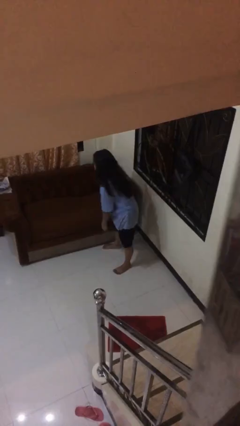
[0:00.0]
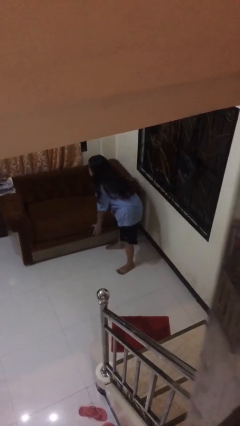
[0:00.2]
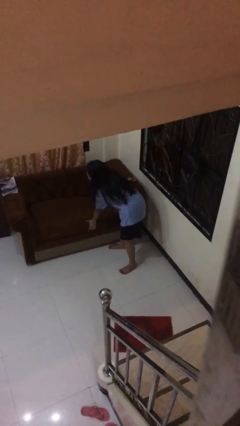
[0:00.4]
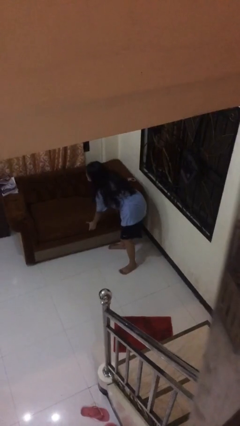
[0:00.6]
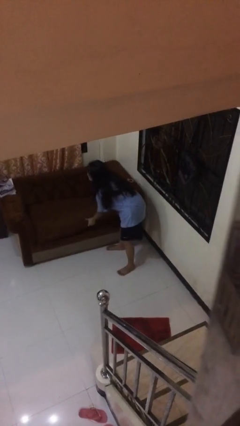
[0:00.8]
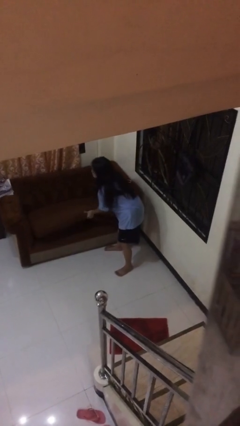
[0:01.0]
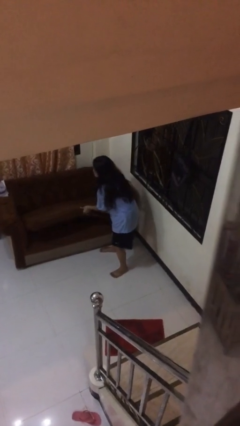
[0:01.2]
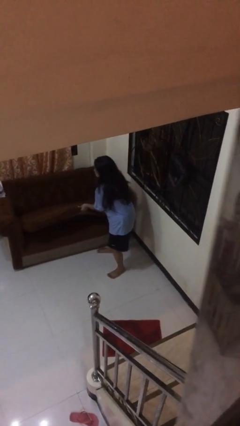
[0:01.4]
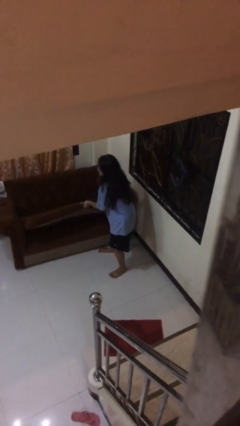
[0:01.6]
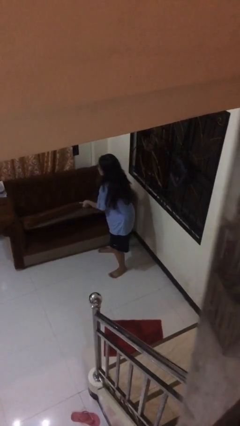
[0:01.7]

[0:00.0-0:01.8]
person picks up object from floor

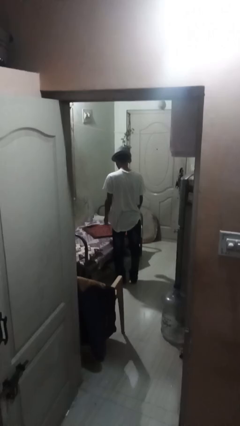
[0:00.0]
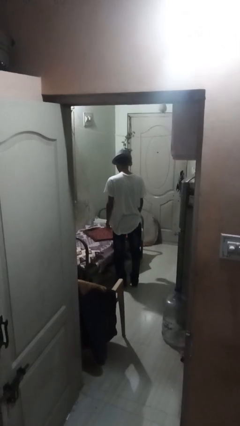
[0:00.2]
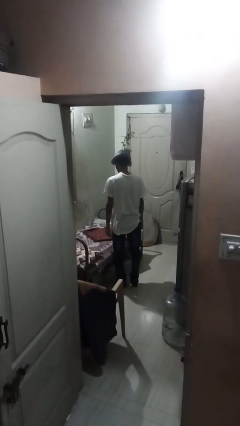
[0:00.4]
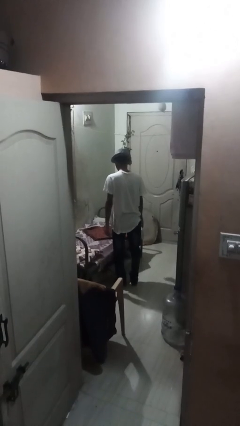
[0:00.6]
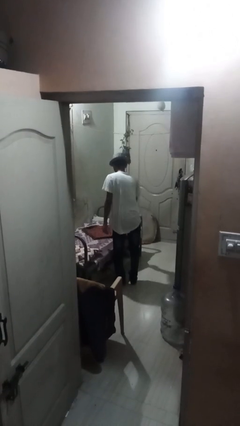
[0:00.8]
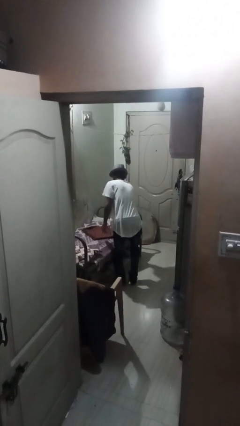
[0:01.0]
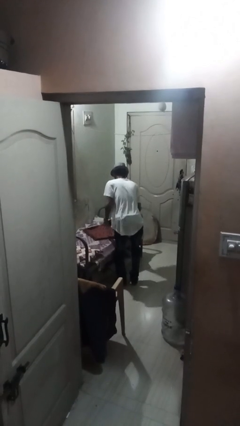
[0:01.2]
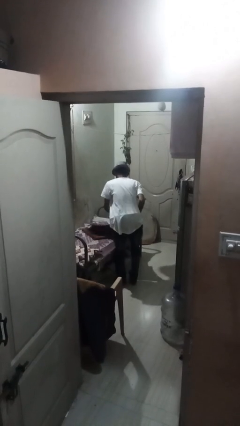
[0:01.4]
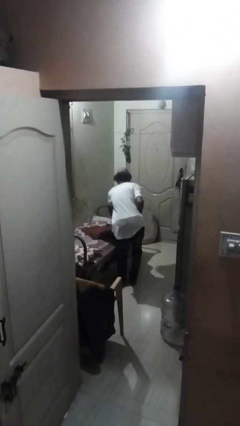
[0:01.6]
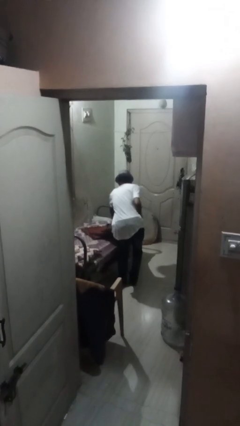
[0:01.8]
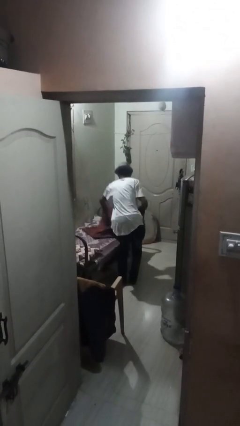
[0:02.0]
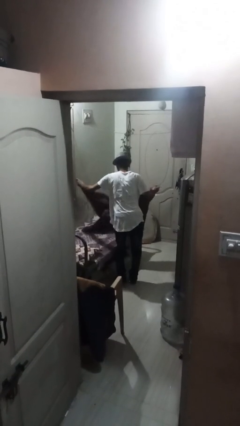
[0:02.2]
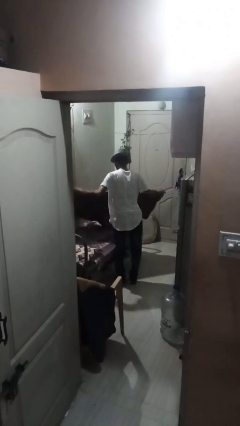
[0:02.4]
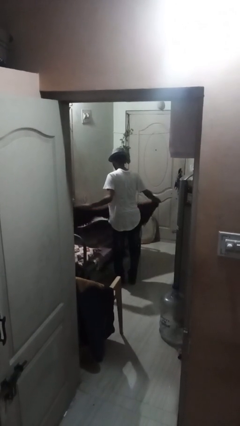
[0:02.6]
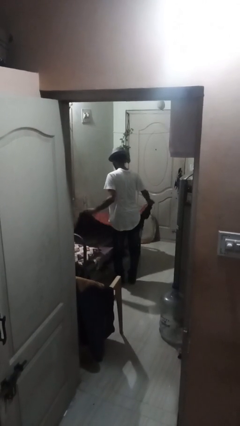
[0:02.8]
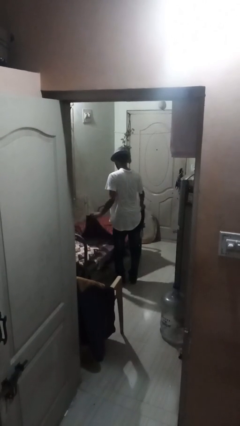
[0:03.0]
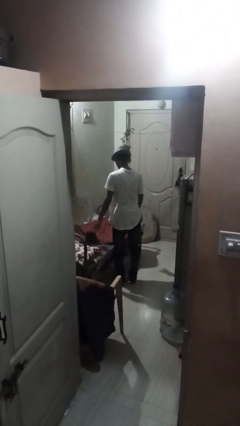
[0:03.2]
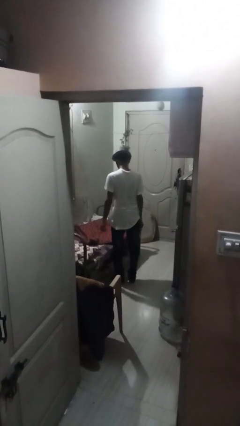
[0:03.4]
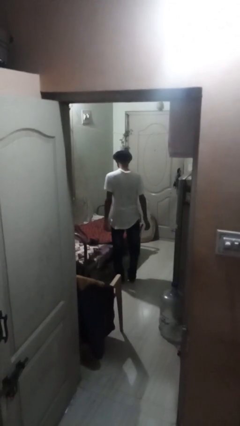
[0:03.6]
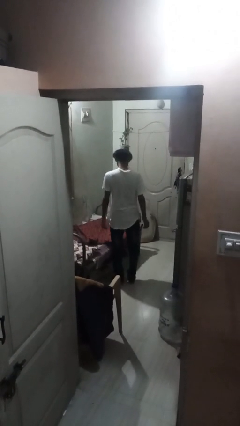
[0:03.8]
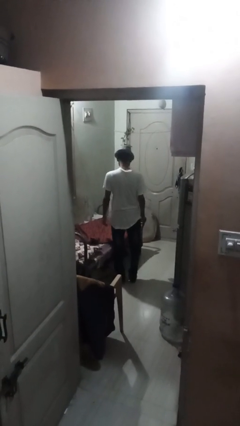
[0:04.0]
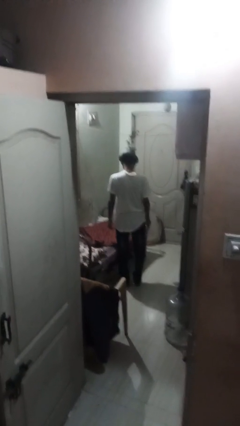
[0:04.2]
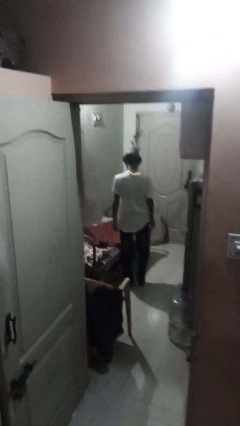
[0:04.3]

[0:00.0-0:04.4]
person unfolds blanket

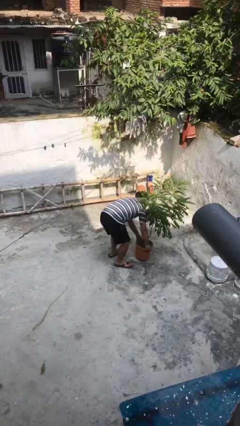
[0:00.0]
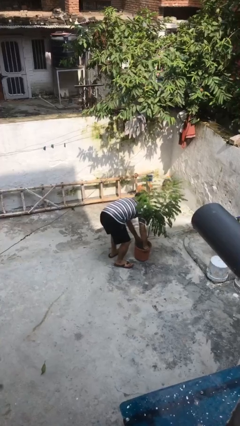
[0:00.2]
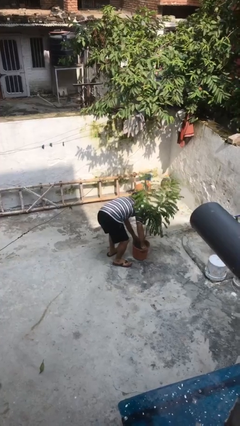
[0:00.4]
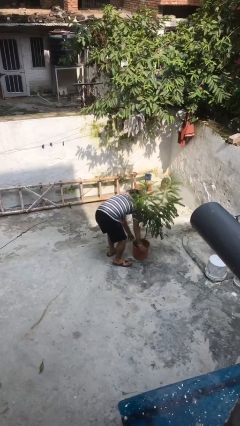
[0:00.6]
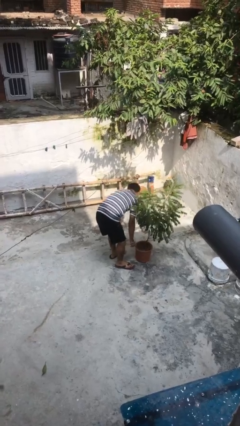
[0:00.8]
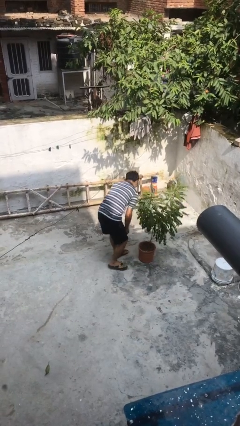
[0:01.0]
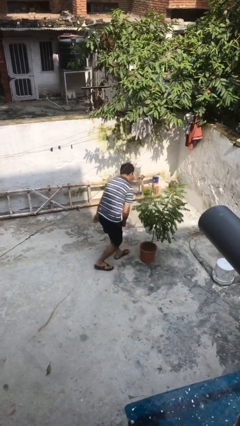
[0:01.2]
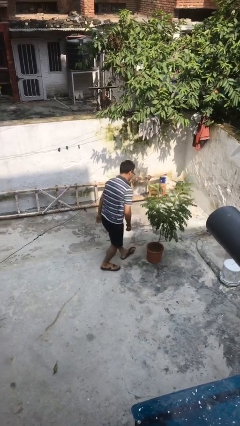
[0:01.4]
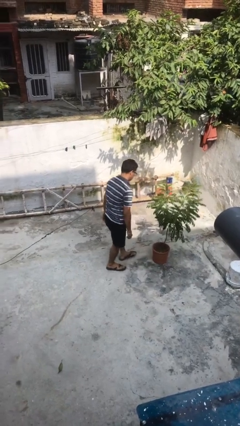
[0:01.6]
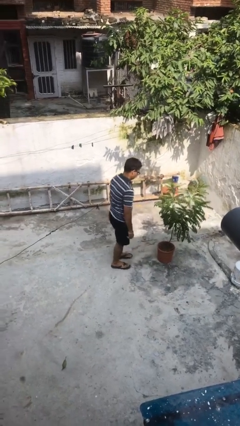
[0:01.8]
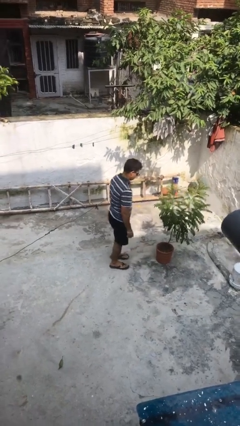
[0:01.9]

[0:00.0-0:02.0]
person puts down object on floor

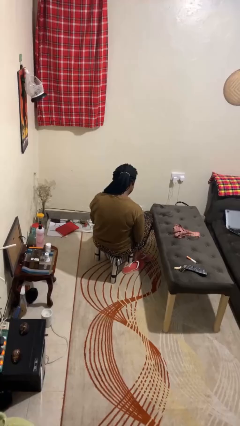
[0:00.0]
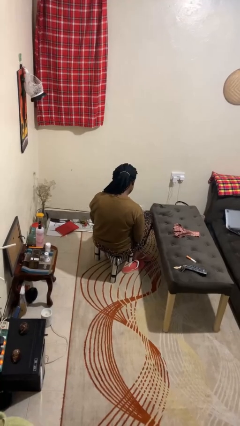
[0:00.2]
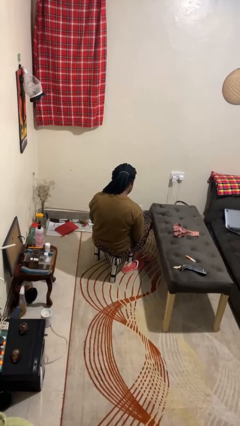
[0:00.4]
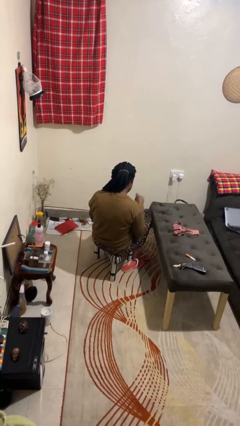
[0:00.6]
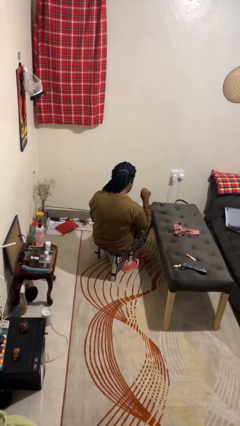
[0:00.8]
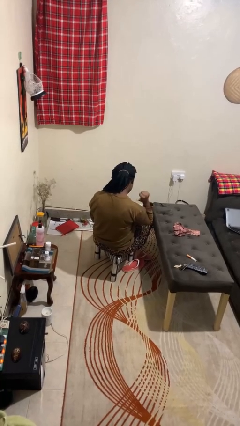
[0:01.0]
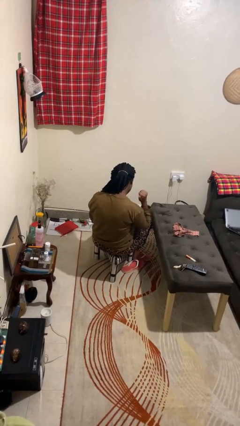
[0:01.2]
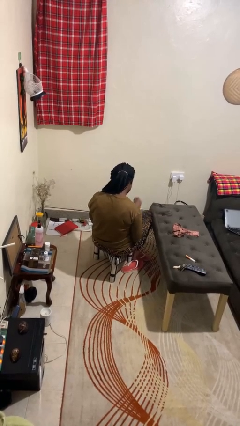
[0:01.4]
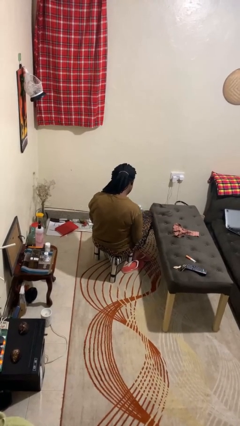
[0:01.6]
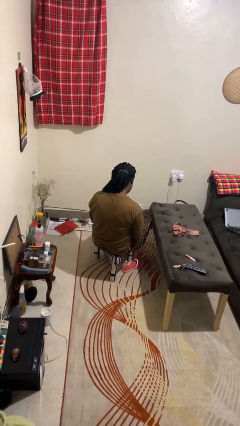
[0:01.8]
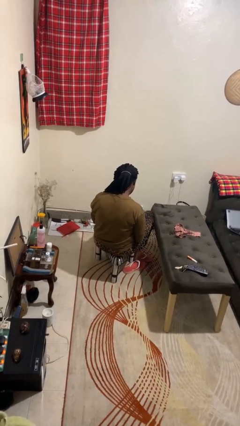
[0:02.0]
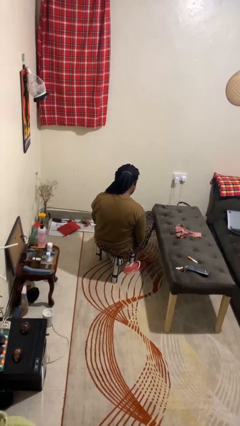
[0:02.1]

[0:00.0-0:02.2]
person gestures behind me

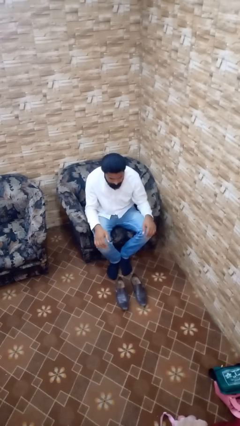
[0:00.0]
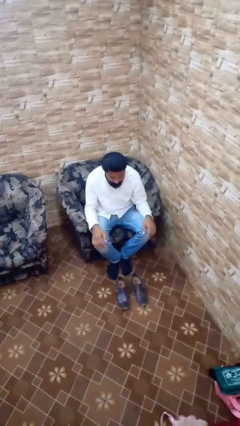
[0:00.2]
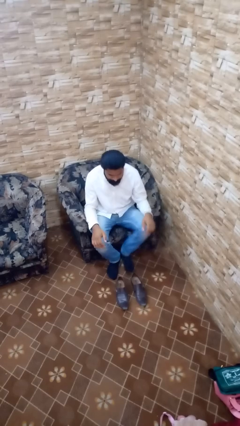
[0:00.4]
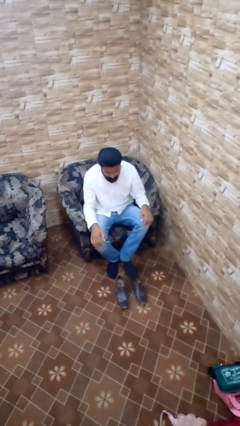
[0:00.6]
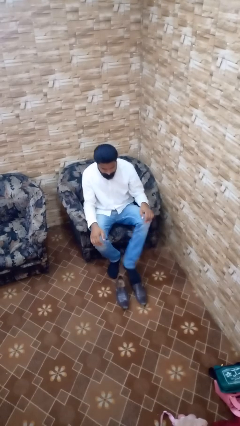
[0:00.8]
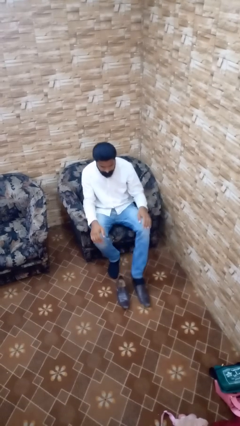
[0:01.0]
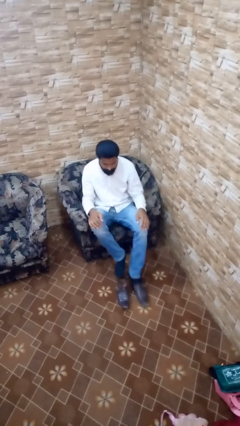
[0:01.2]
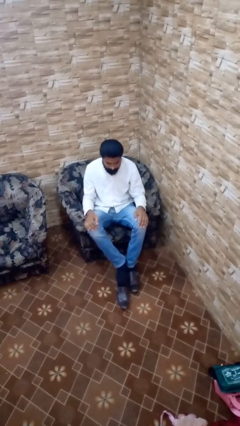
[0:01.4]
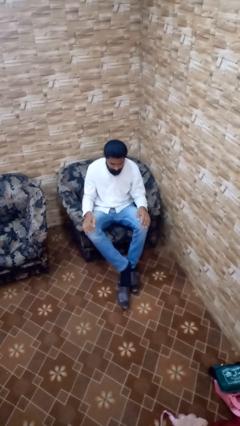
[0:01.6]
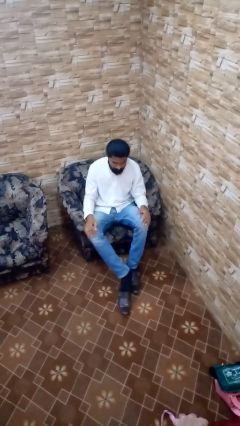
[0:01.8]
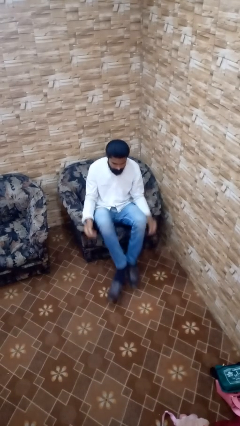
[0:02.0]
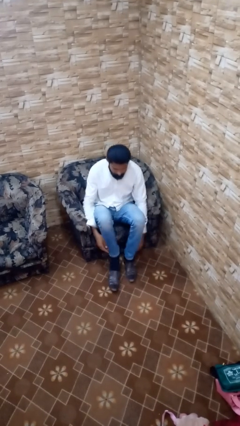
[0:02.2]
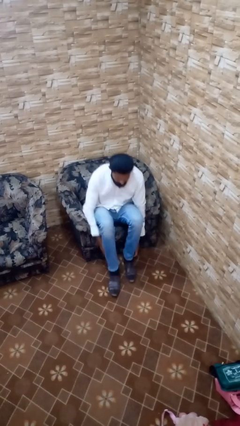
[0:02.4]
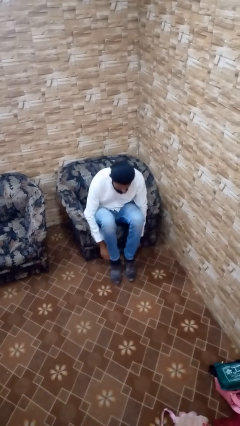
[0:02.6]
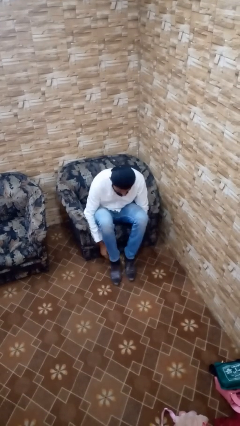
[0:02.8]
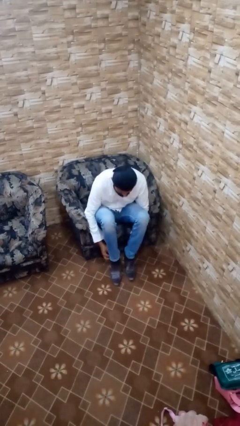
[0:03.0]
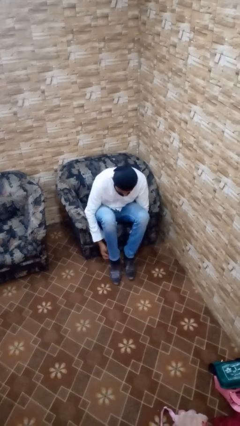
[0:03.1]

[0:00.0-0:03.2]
person puts on shoes

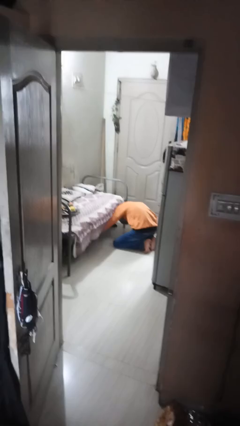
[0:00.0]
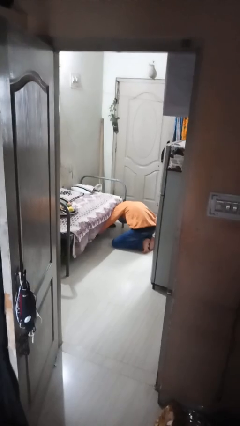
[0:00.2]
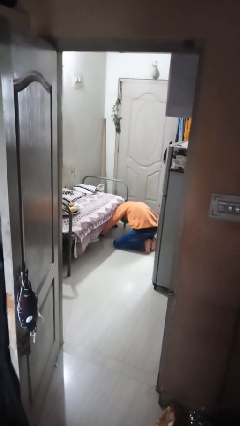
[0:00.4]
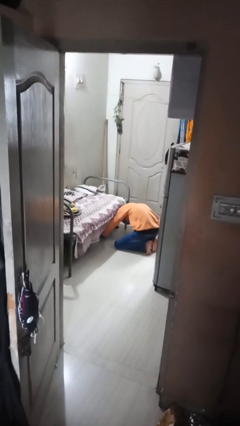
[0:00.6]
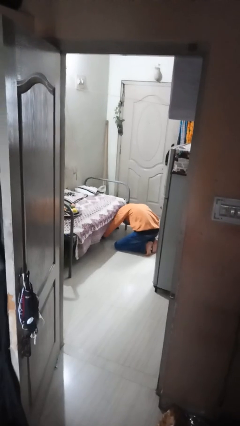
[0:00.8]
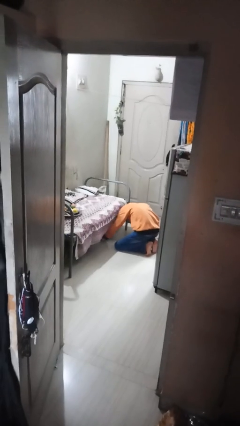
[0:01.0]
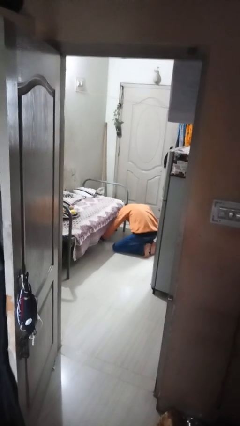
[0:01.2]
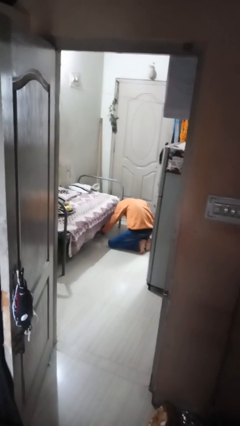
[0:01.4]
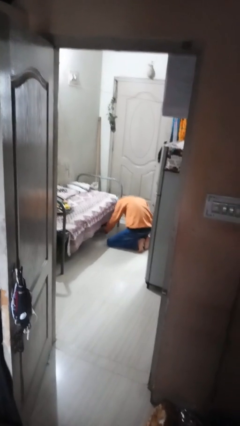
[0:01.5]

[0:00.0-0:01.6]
person searches under bed

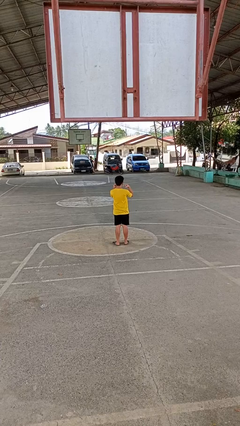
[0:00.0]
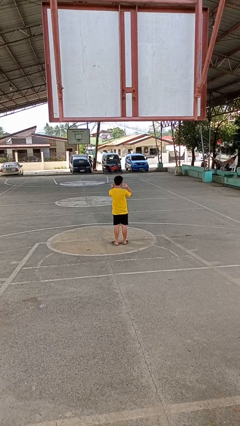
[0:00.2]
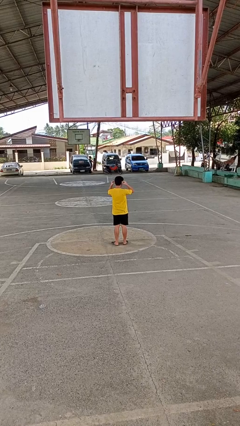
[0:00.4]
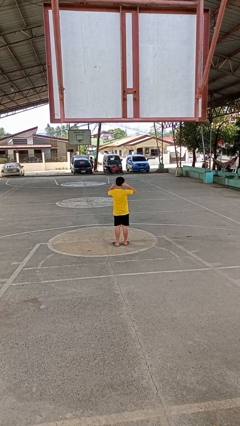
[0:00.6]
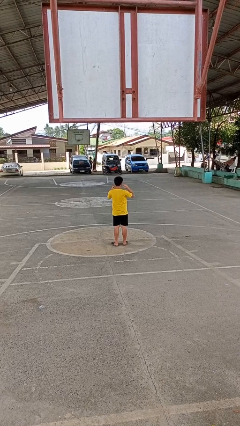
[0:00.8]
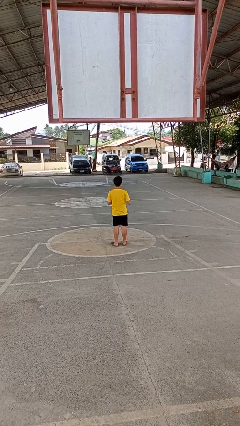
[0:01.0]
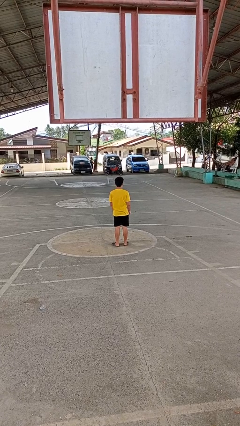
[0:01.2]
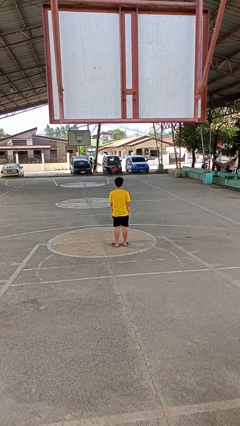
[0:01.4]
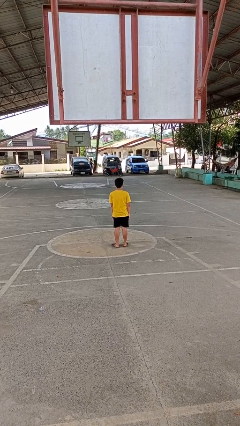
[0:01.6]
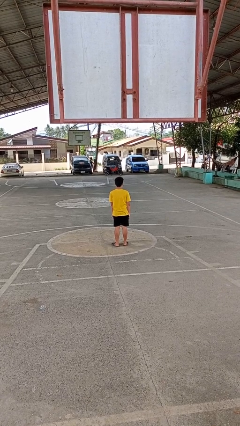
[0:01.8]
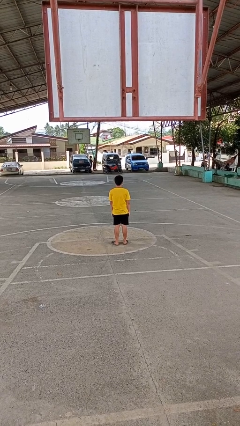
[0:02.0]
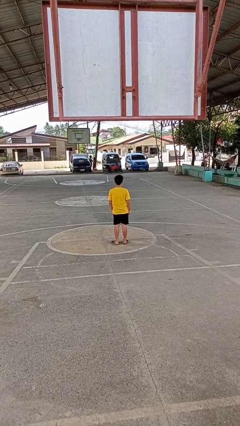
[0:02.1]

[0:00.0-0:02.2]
person puts on facemask
